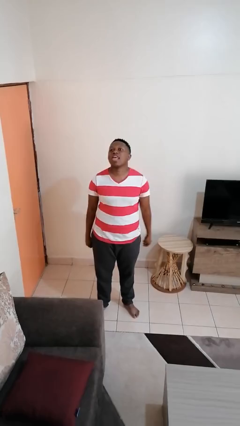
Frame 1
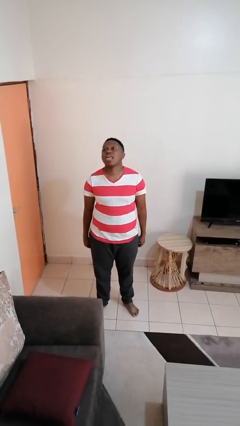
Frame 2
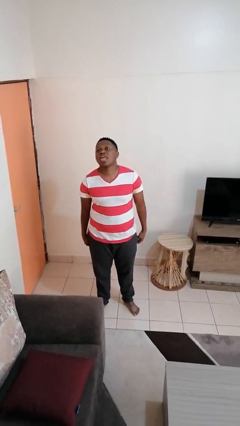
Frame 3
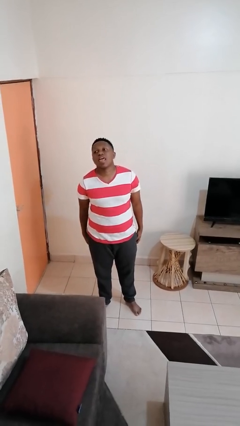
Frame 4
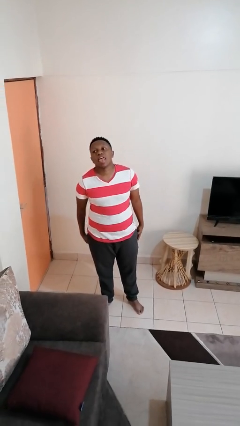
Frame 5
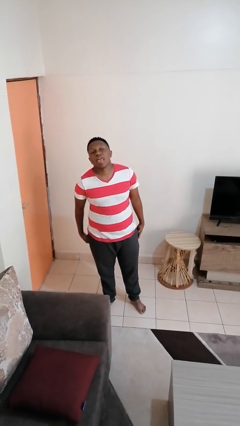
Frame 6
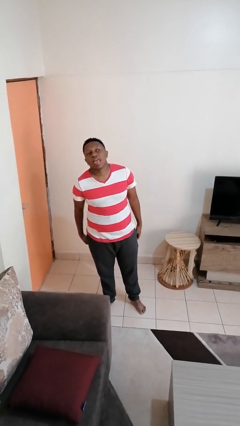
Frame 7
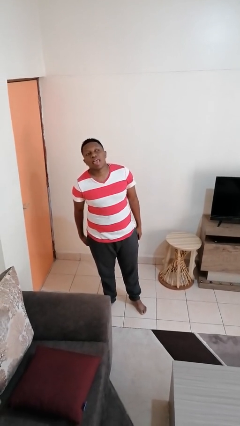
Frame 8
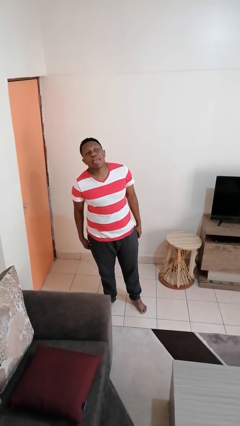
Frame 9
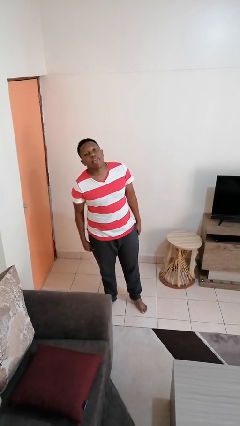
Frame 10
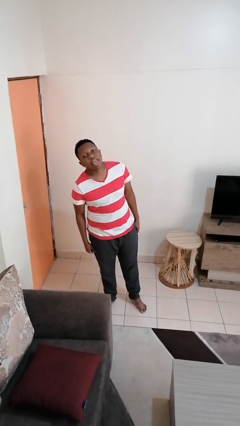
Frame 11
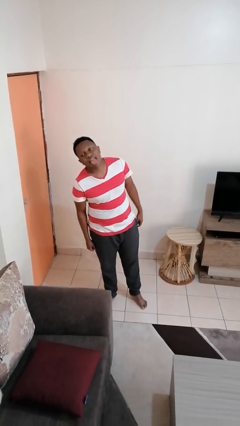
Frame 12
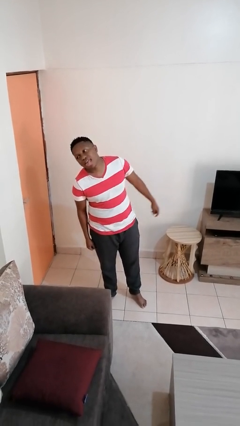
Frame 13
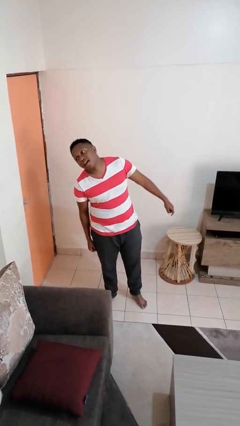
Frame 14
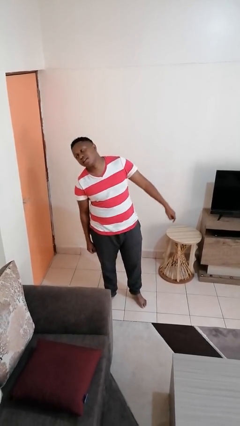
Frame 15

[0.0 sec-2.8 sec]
person sticks out tongue

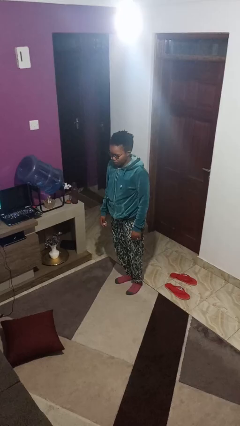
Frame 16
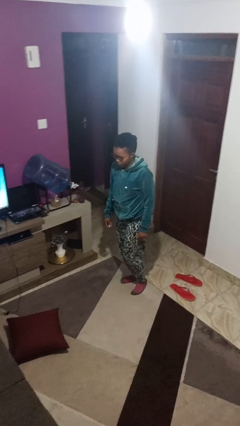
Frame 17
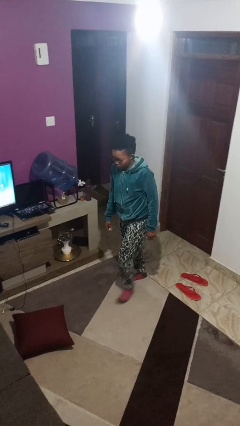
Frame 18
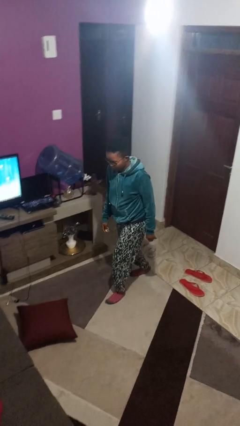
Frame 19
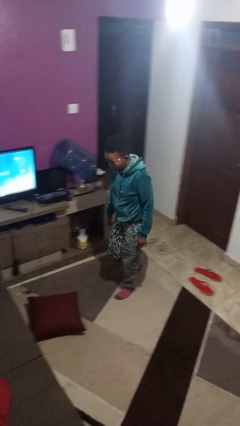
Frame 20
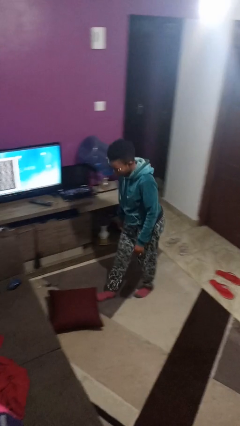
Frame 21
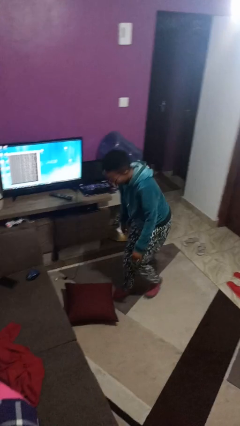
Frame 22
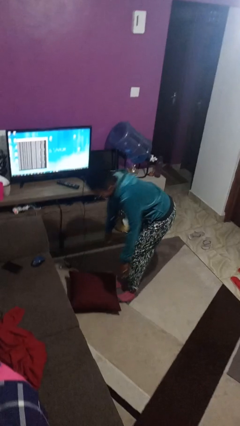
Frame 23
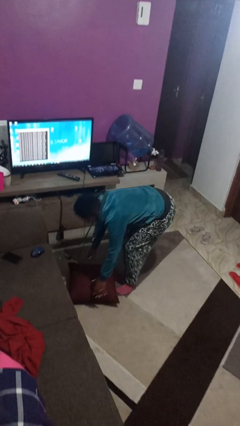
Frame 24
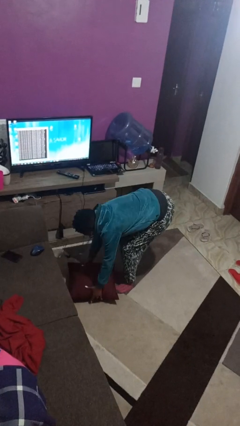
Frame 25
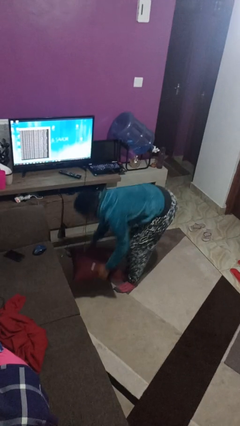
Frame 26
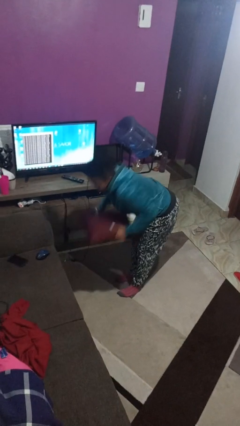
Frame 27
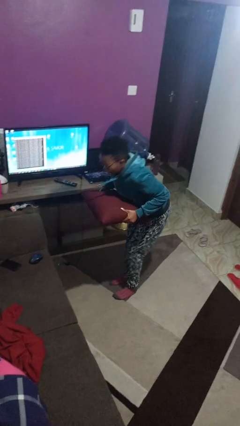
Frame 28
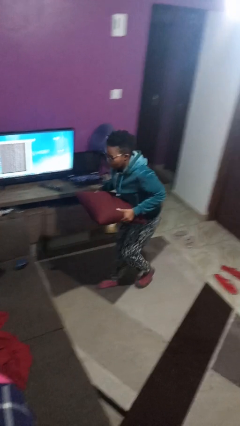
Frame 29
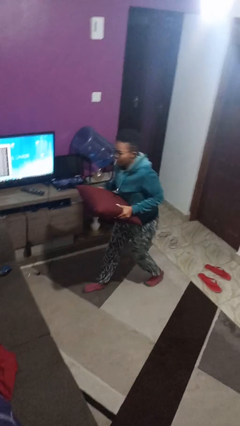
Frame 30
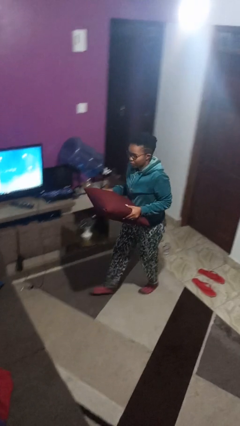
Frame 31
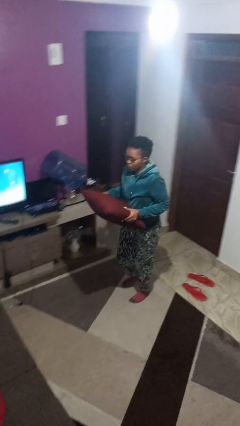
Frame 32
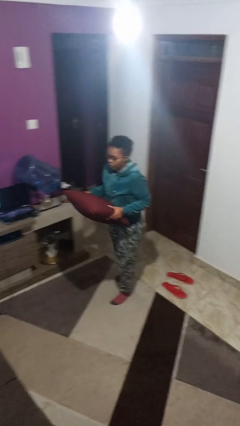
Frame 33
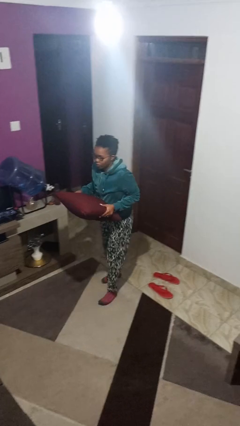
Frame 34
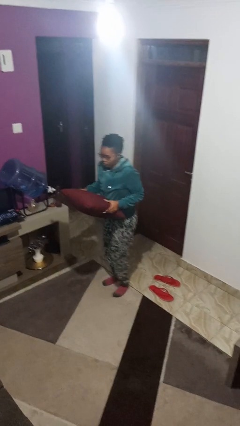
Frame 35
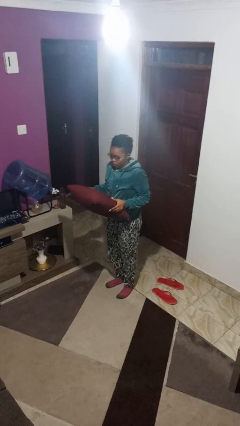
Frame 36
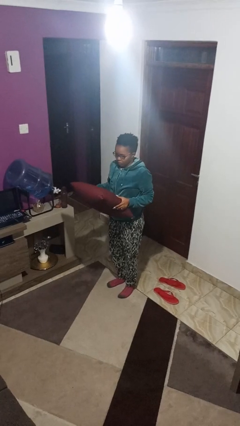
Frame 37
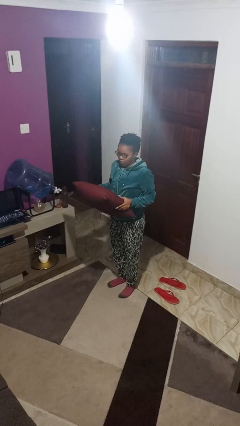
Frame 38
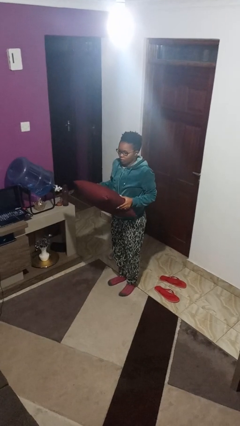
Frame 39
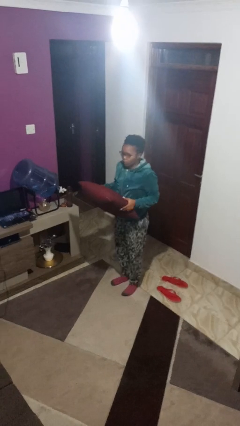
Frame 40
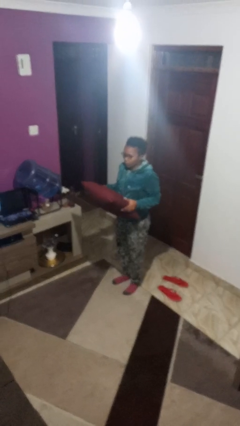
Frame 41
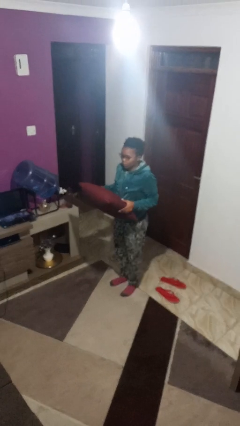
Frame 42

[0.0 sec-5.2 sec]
person picks up object from floor

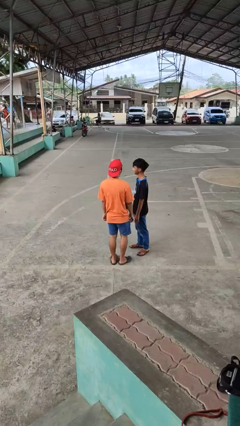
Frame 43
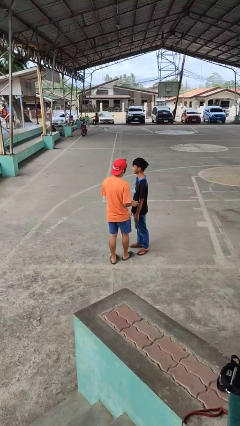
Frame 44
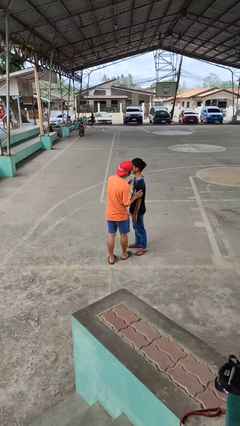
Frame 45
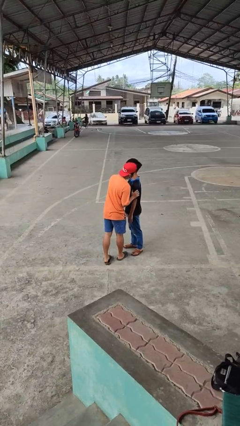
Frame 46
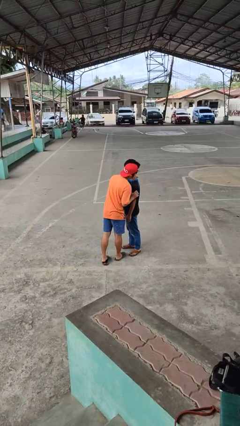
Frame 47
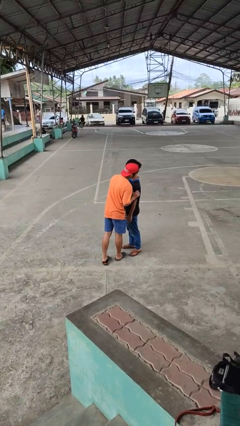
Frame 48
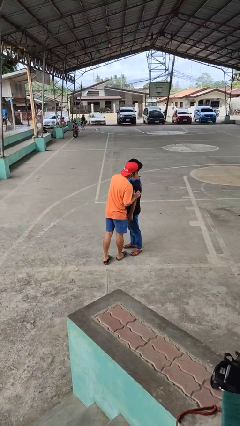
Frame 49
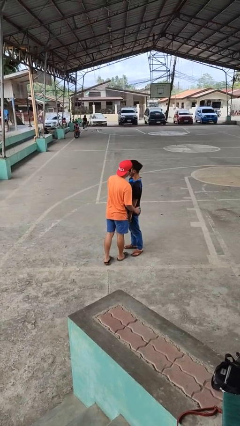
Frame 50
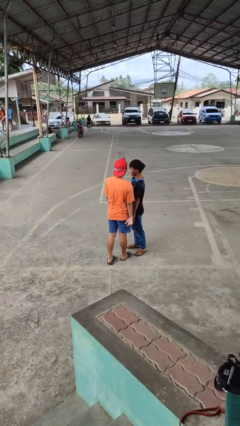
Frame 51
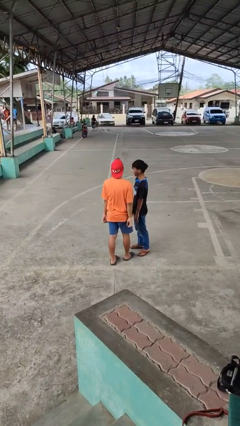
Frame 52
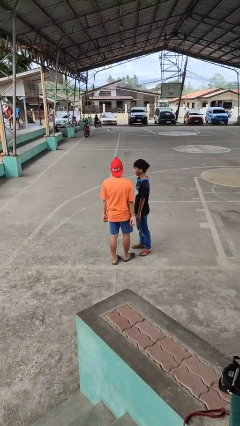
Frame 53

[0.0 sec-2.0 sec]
person kisses cheek of person

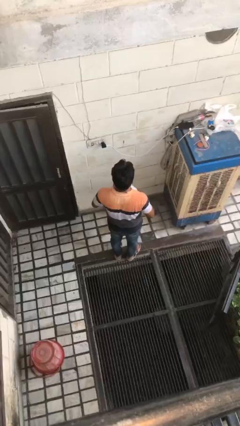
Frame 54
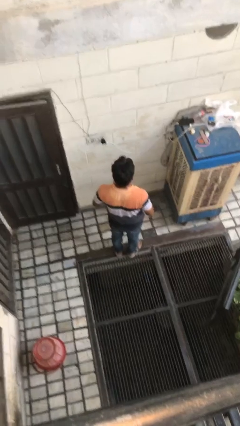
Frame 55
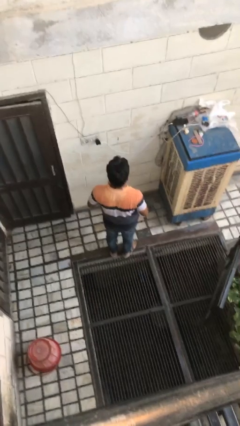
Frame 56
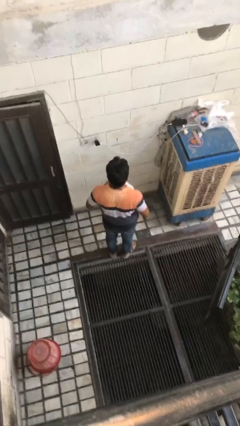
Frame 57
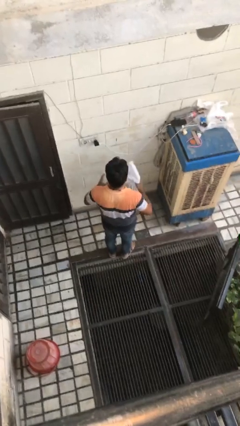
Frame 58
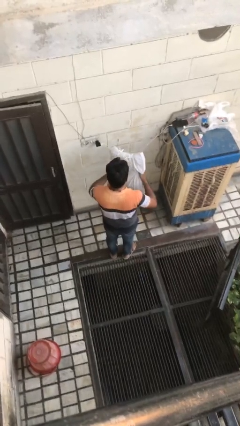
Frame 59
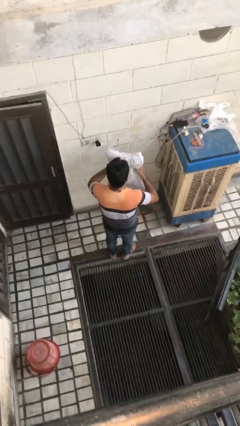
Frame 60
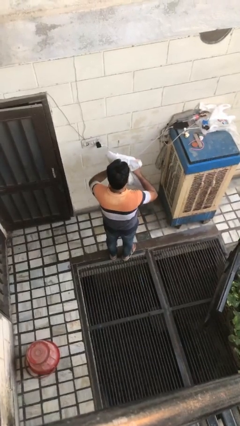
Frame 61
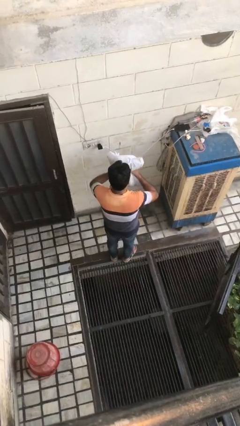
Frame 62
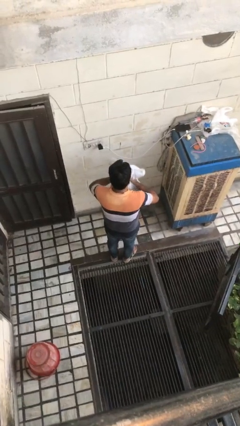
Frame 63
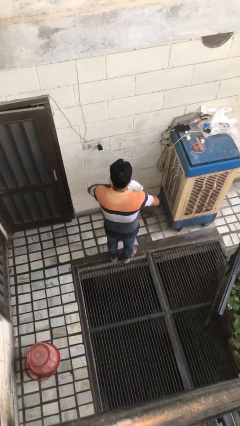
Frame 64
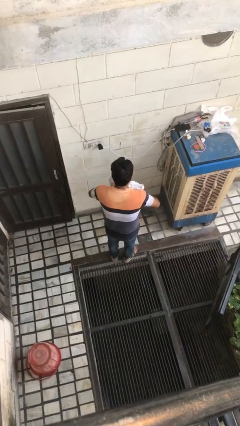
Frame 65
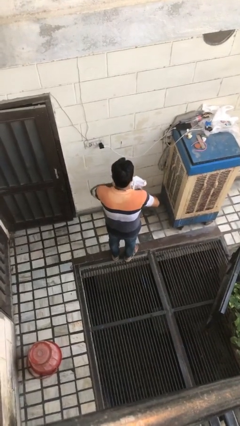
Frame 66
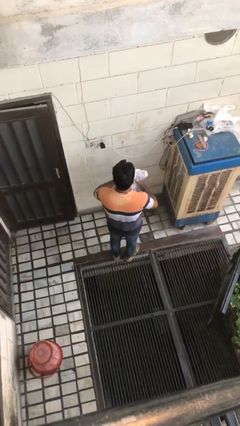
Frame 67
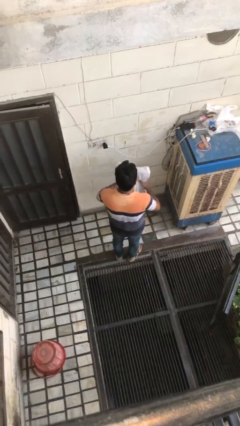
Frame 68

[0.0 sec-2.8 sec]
person squeezes object

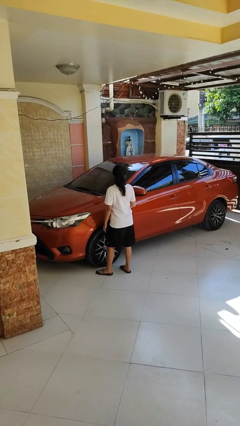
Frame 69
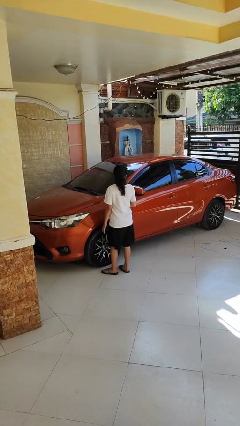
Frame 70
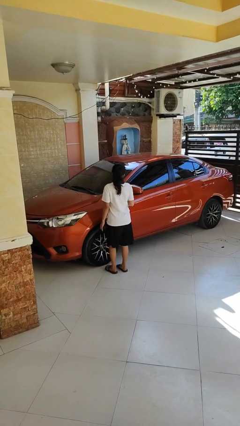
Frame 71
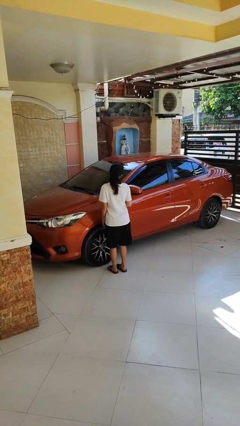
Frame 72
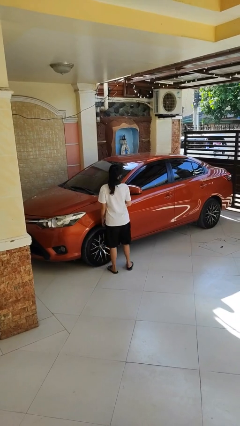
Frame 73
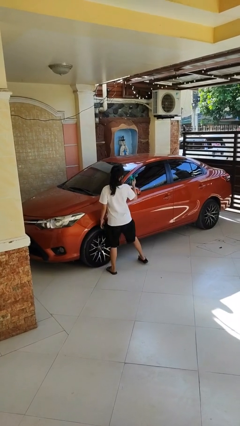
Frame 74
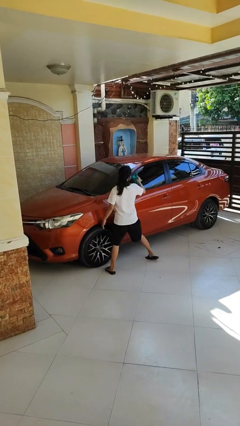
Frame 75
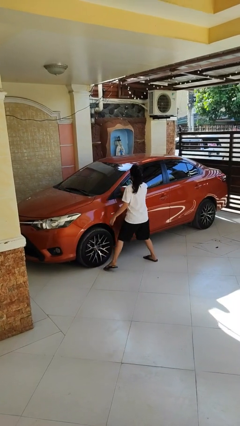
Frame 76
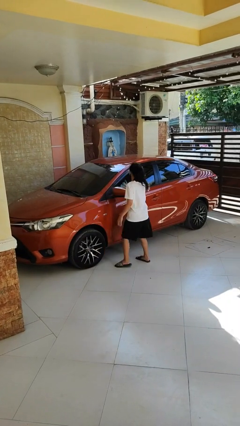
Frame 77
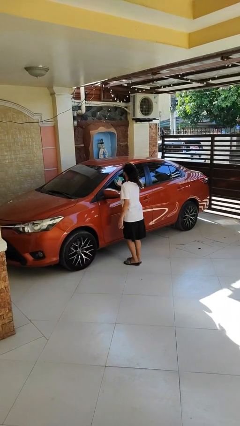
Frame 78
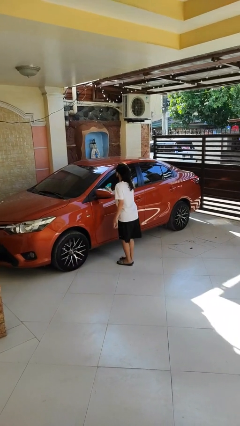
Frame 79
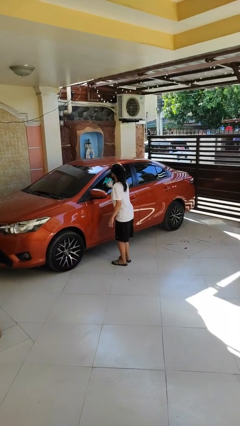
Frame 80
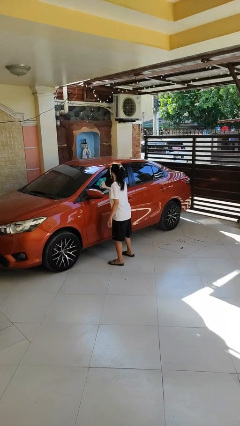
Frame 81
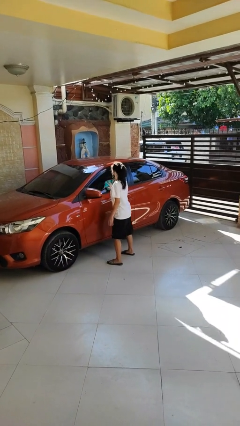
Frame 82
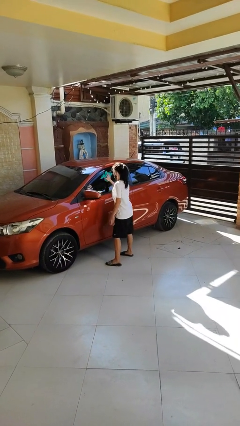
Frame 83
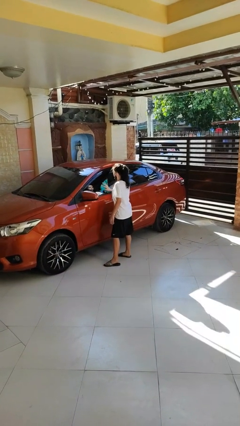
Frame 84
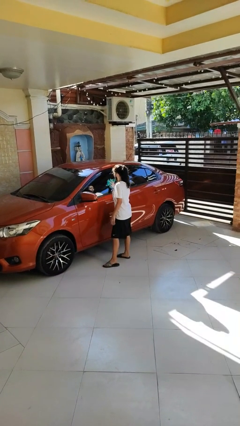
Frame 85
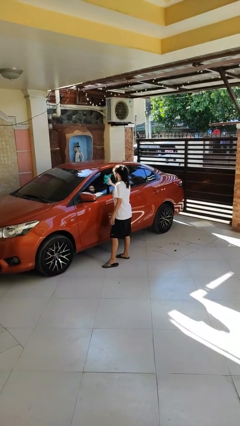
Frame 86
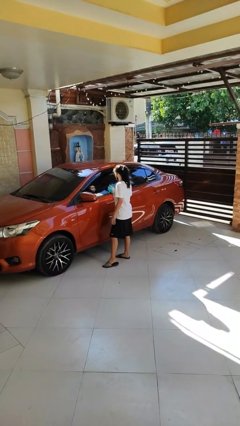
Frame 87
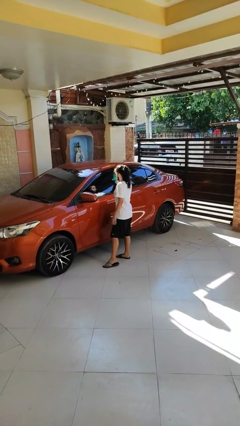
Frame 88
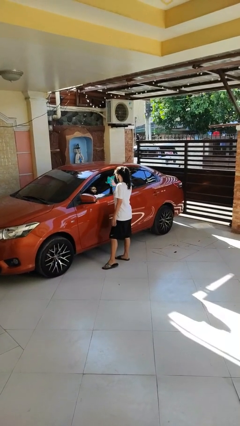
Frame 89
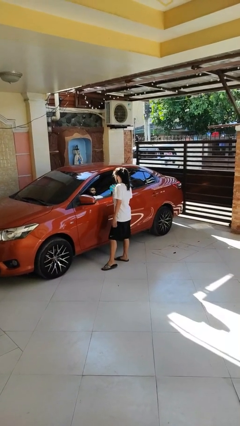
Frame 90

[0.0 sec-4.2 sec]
person polishes car with rag

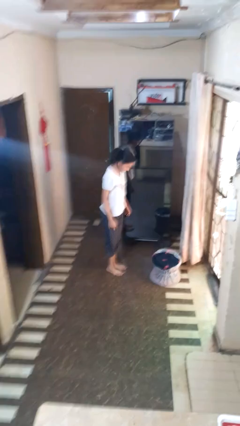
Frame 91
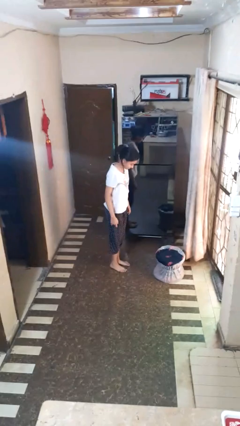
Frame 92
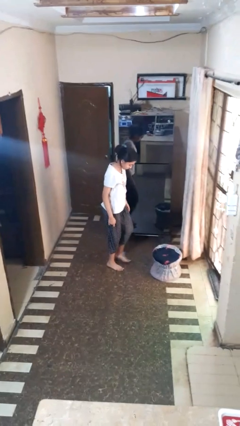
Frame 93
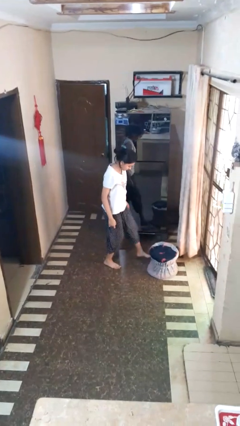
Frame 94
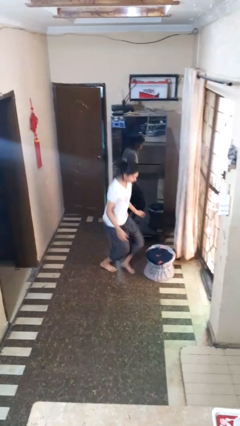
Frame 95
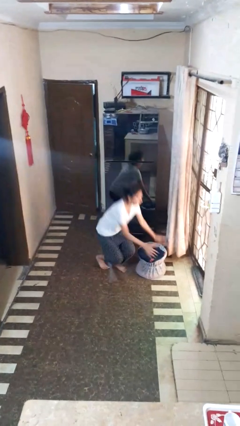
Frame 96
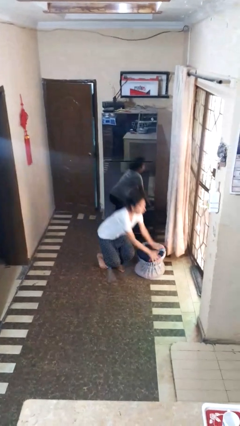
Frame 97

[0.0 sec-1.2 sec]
person trips on object on floor
